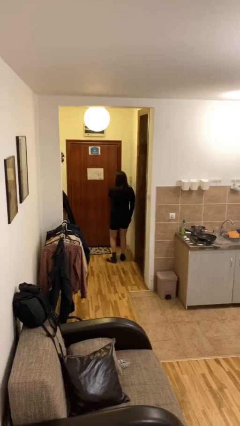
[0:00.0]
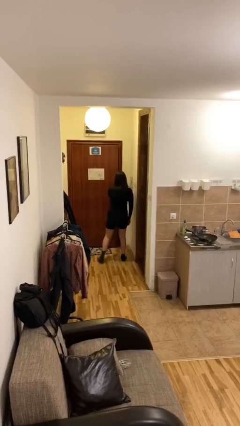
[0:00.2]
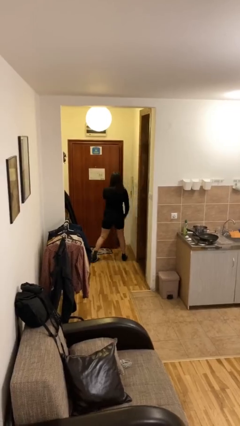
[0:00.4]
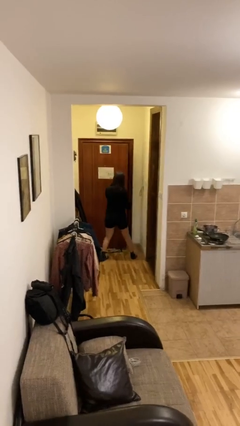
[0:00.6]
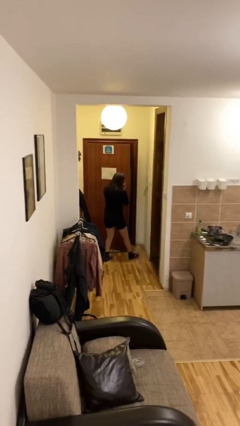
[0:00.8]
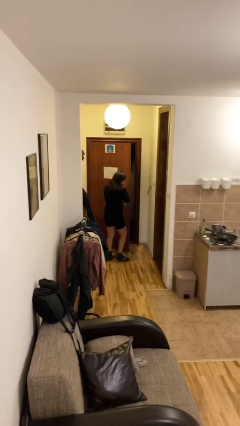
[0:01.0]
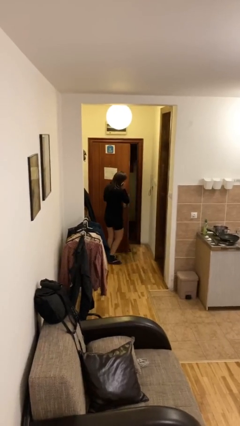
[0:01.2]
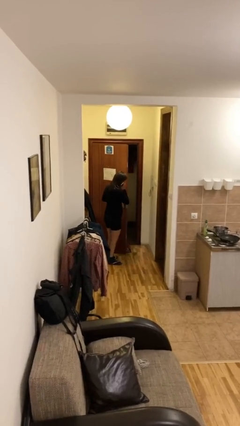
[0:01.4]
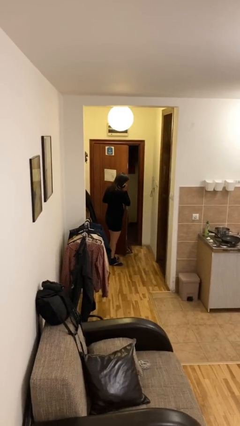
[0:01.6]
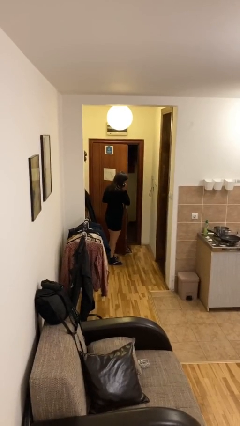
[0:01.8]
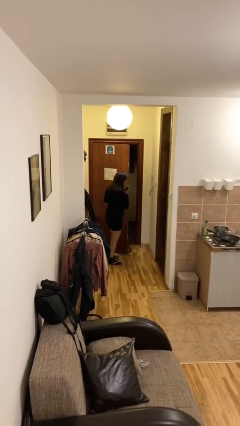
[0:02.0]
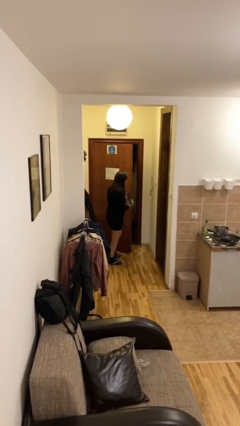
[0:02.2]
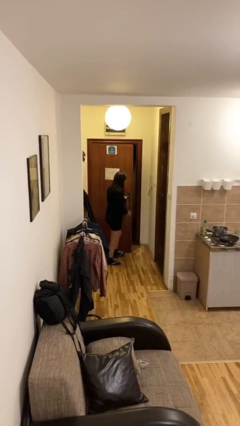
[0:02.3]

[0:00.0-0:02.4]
person opens facility door

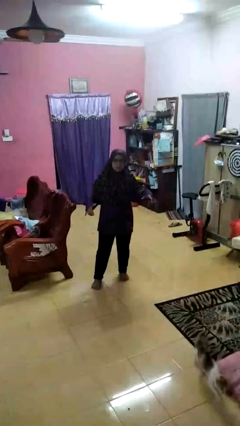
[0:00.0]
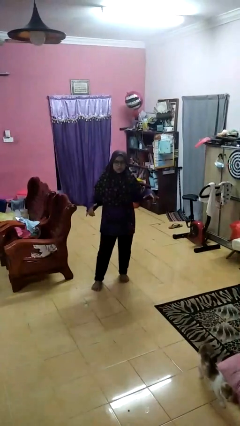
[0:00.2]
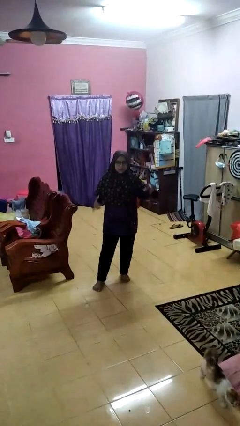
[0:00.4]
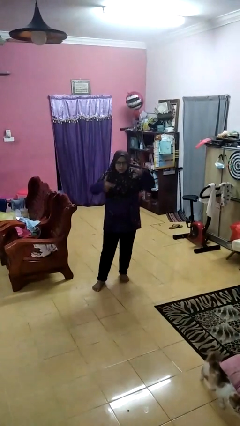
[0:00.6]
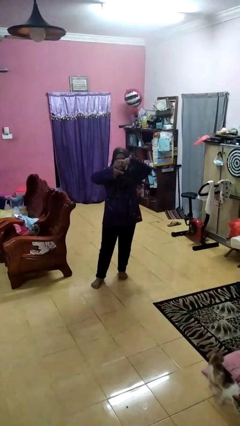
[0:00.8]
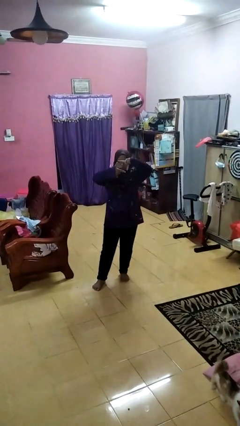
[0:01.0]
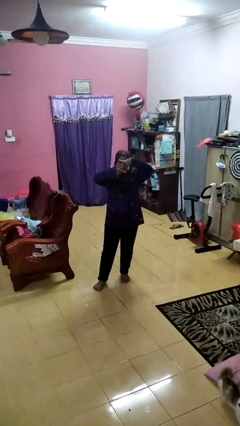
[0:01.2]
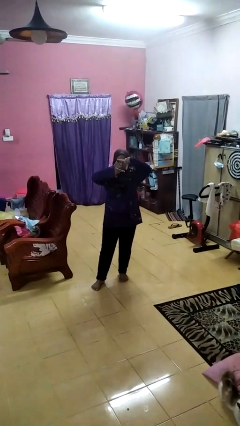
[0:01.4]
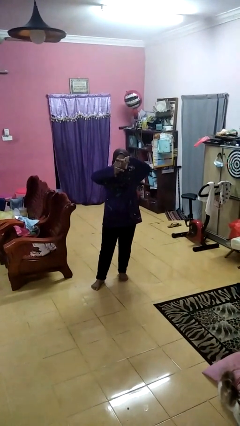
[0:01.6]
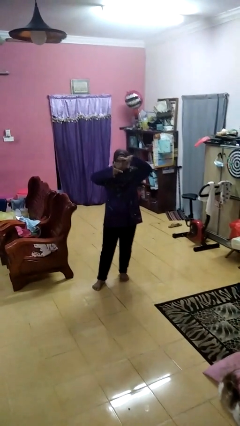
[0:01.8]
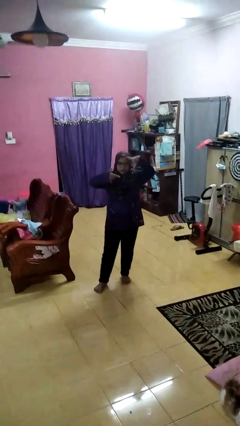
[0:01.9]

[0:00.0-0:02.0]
person gestures zoom in

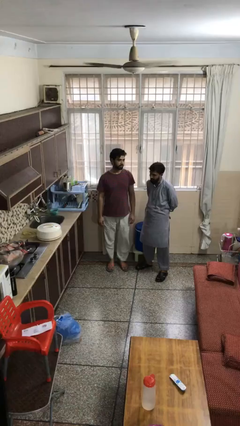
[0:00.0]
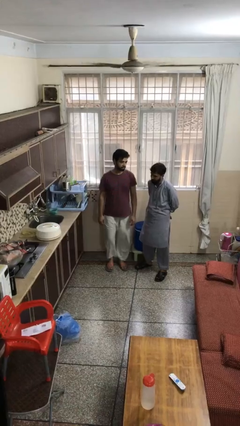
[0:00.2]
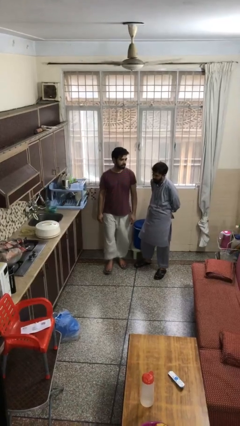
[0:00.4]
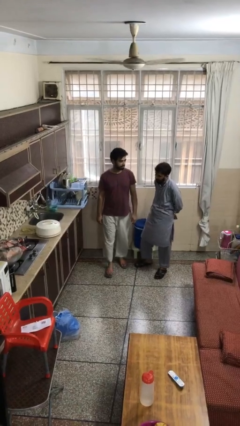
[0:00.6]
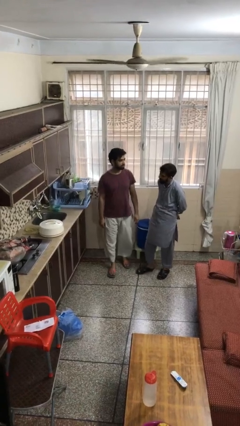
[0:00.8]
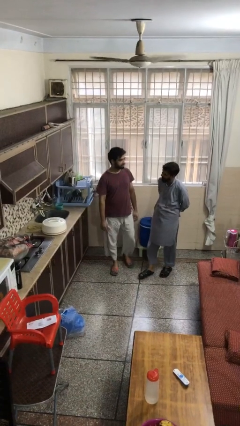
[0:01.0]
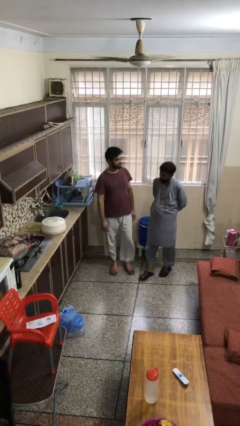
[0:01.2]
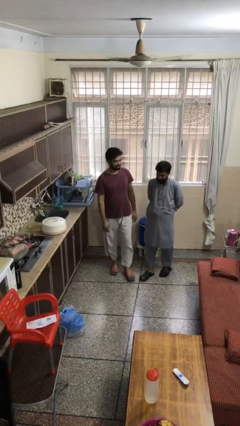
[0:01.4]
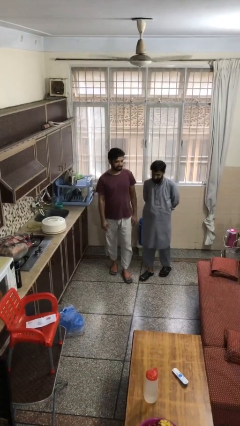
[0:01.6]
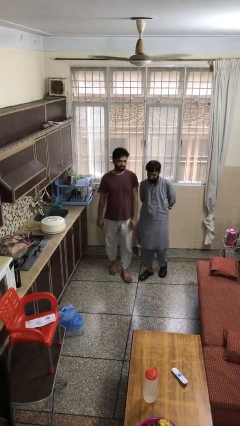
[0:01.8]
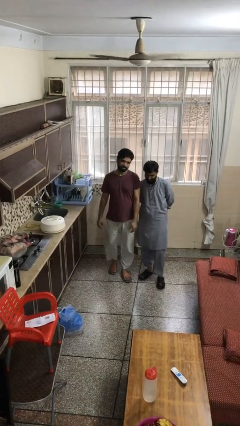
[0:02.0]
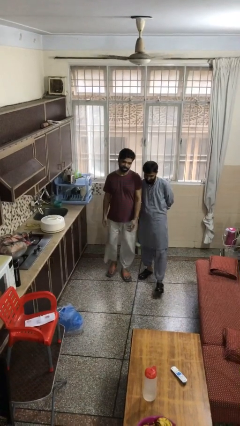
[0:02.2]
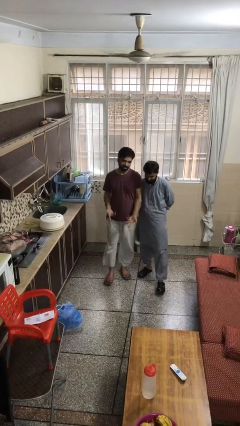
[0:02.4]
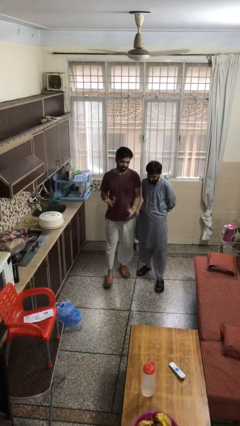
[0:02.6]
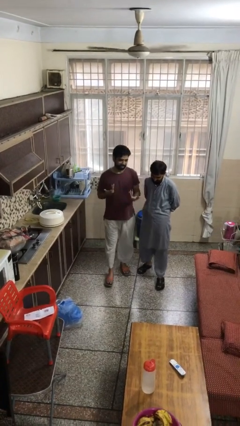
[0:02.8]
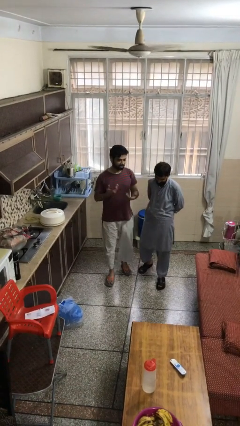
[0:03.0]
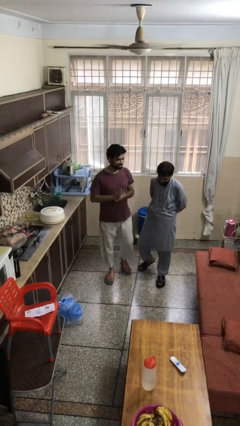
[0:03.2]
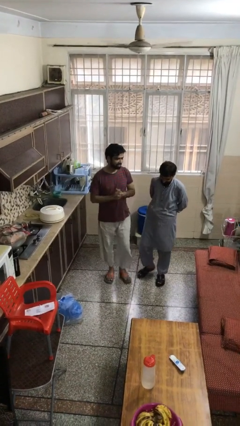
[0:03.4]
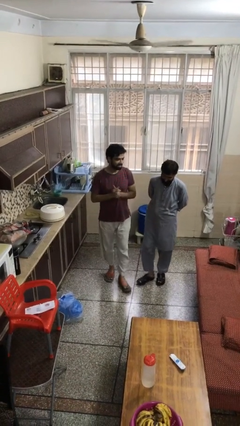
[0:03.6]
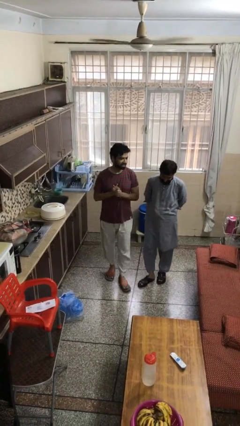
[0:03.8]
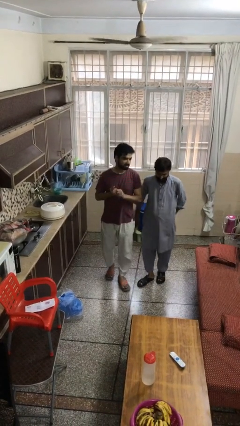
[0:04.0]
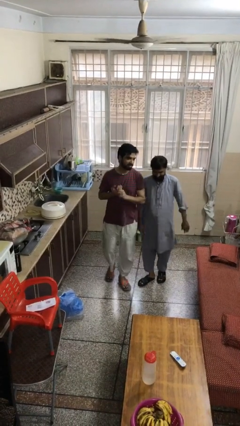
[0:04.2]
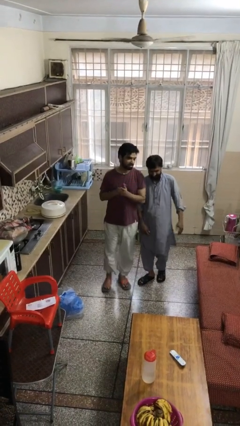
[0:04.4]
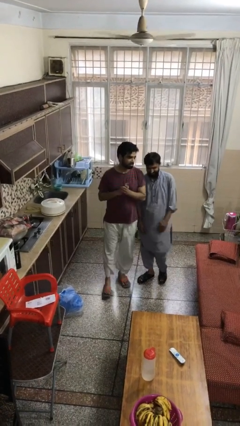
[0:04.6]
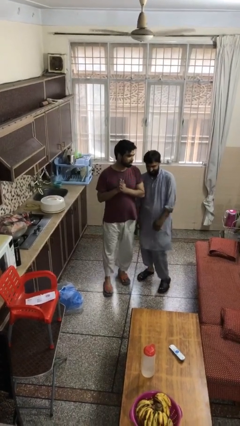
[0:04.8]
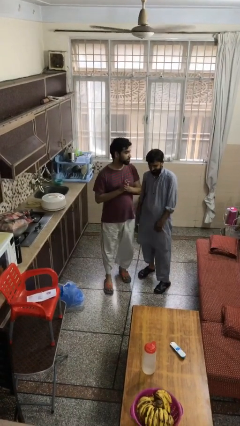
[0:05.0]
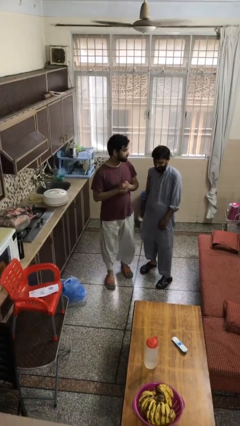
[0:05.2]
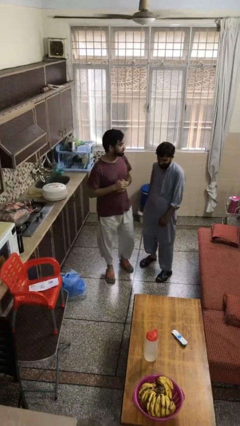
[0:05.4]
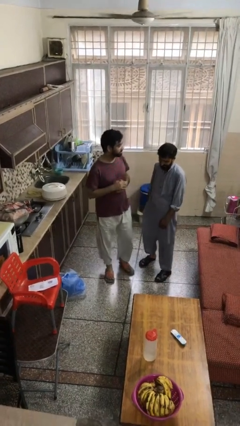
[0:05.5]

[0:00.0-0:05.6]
person talks to person

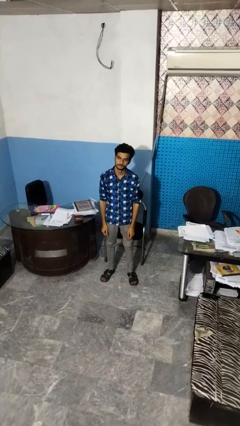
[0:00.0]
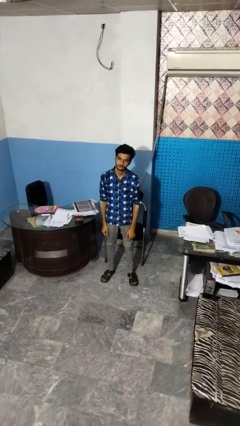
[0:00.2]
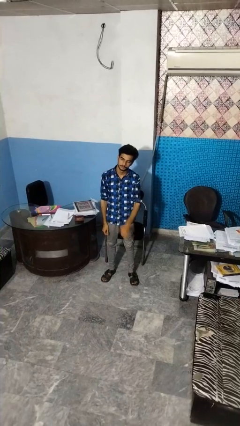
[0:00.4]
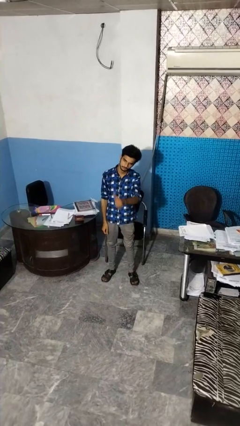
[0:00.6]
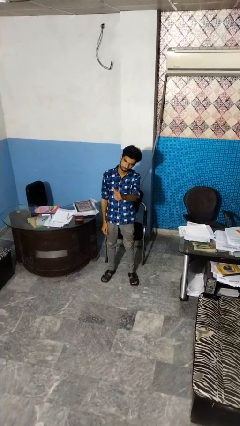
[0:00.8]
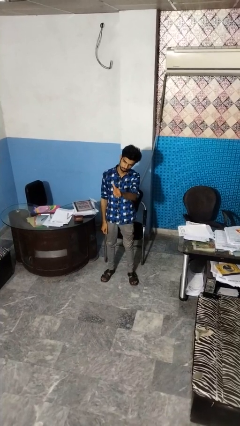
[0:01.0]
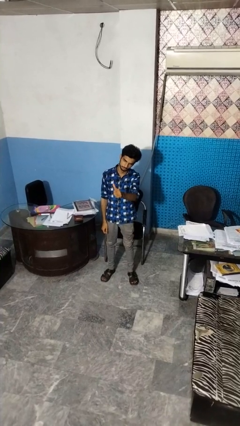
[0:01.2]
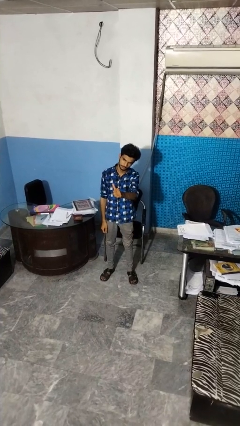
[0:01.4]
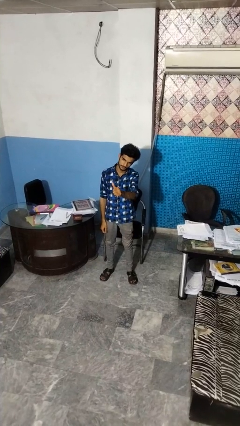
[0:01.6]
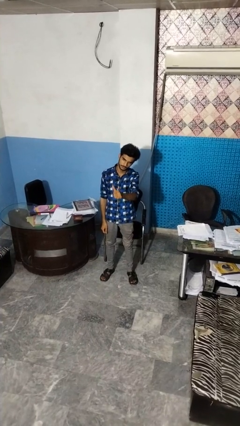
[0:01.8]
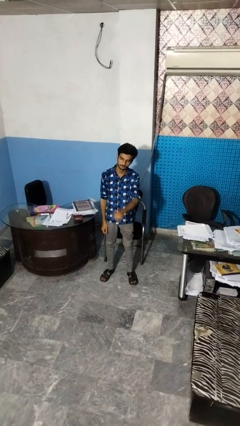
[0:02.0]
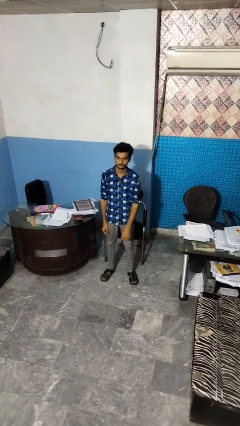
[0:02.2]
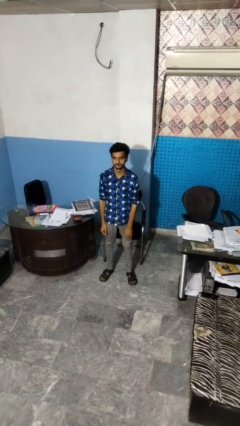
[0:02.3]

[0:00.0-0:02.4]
person gestures thumbs up

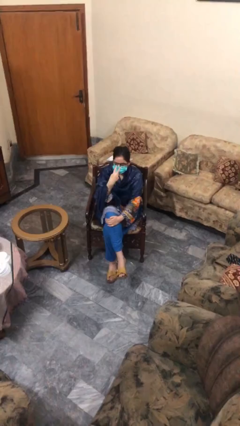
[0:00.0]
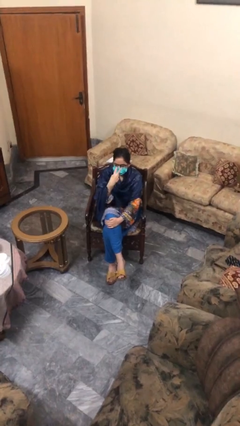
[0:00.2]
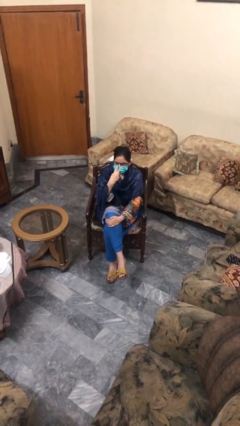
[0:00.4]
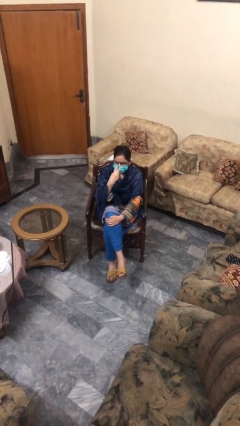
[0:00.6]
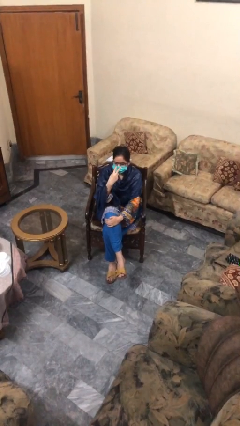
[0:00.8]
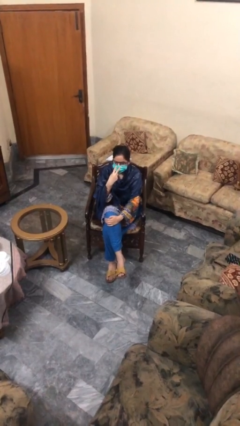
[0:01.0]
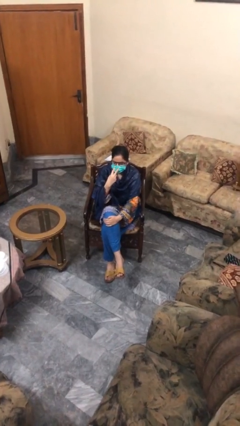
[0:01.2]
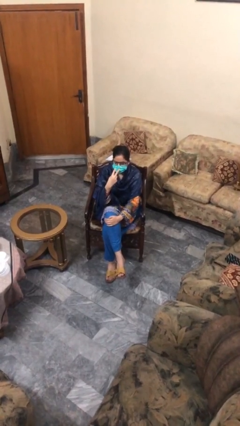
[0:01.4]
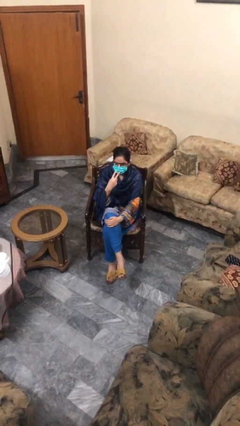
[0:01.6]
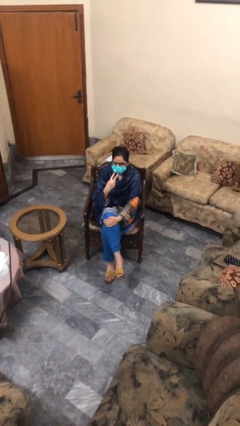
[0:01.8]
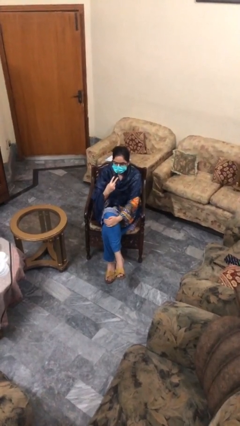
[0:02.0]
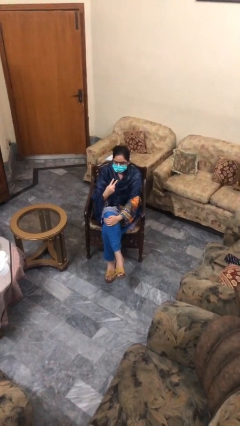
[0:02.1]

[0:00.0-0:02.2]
person gestures watch closely

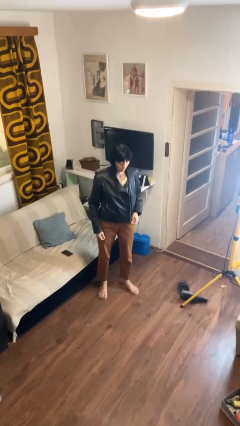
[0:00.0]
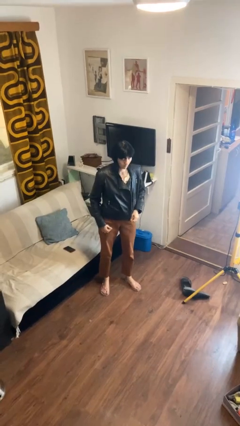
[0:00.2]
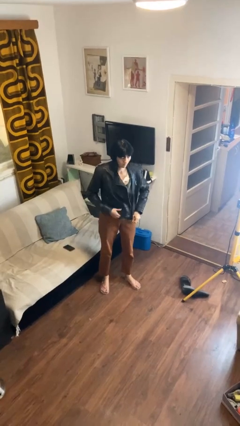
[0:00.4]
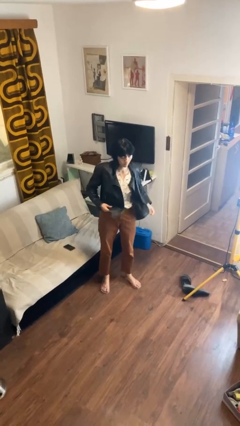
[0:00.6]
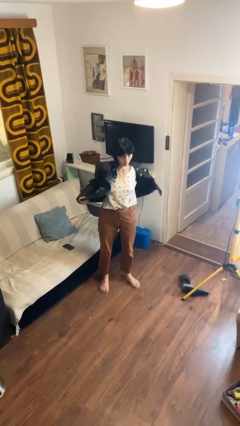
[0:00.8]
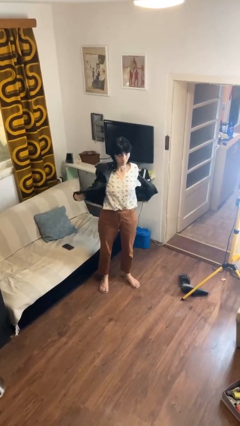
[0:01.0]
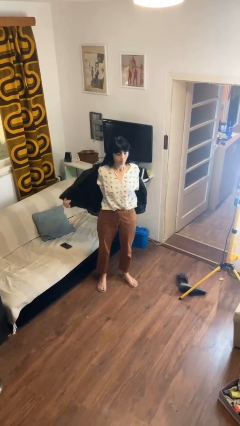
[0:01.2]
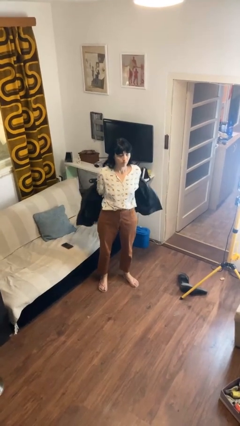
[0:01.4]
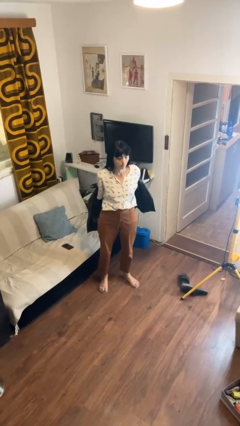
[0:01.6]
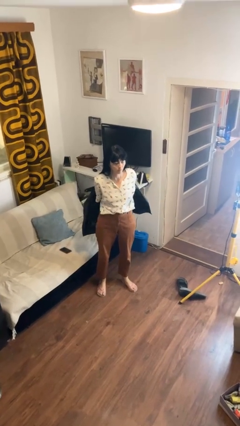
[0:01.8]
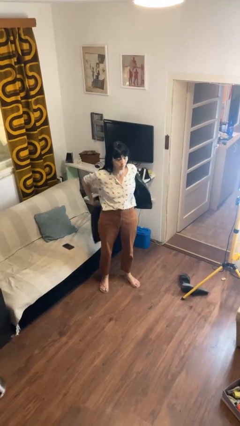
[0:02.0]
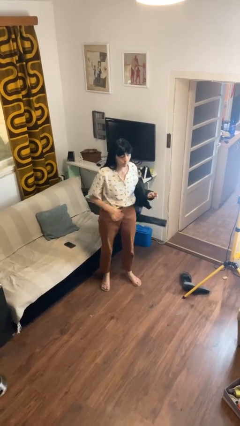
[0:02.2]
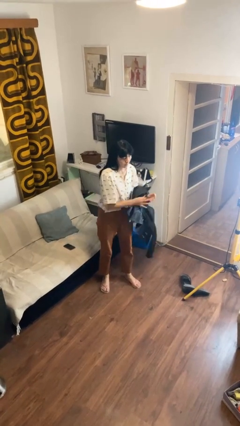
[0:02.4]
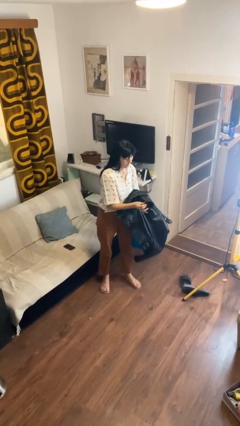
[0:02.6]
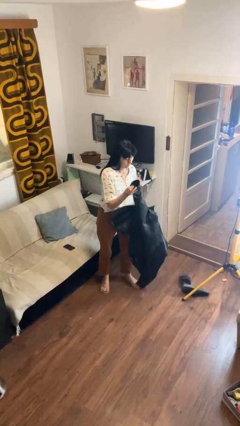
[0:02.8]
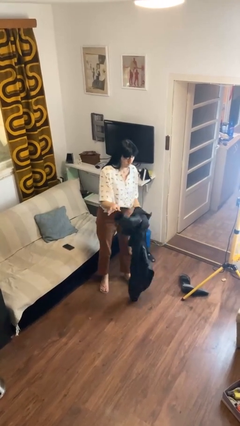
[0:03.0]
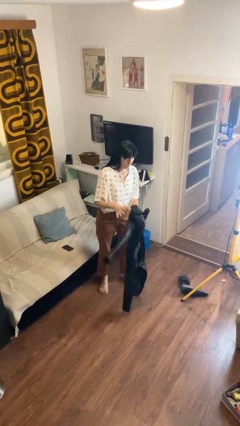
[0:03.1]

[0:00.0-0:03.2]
person takes off jacket
